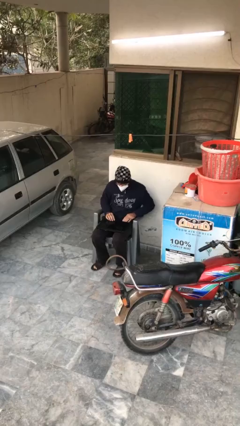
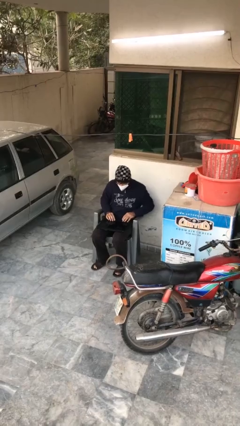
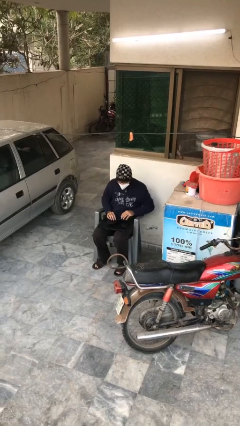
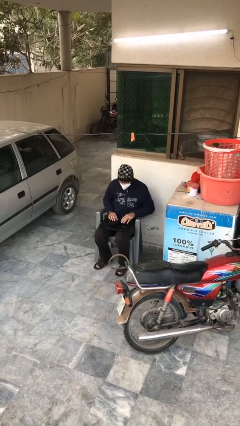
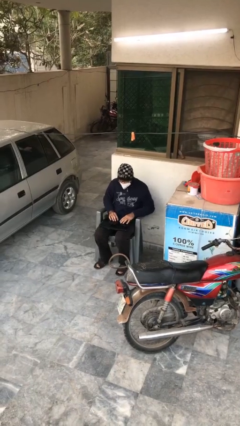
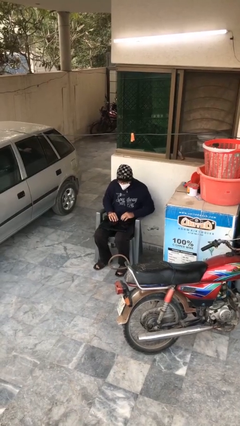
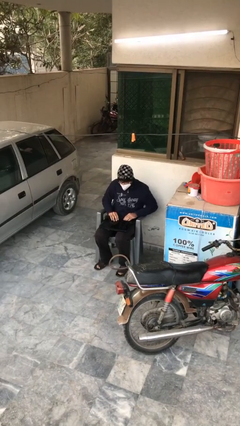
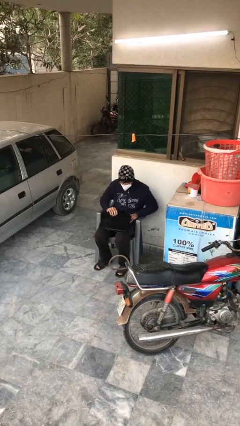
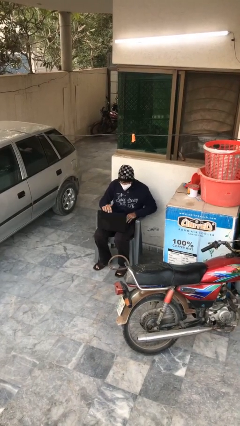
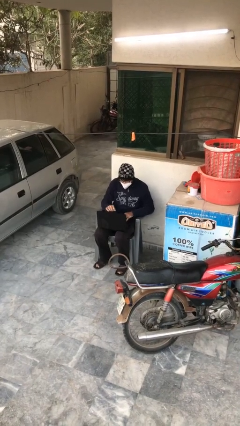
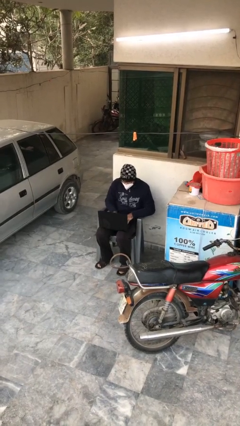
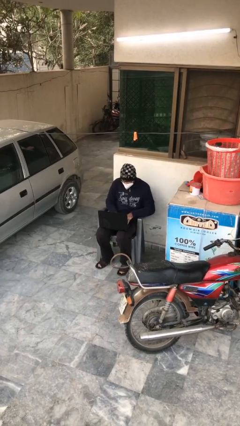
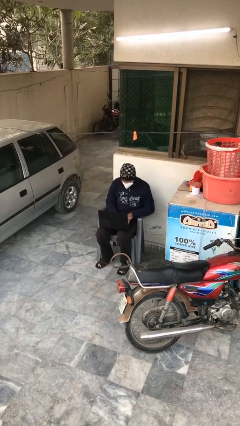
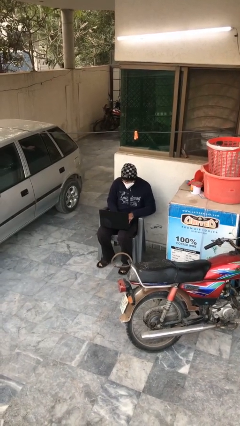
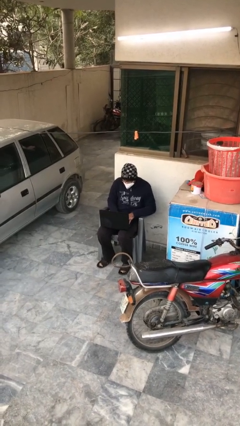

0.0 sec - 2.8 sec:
person interacts with laptop

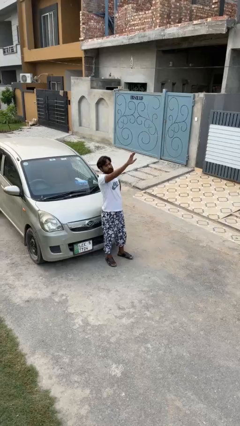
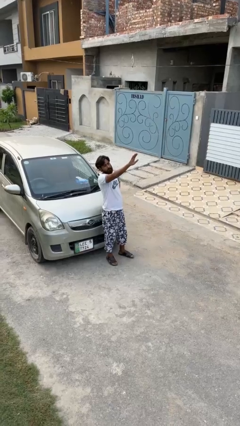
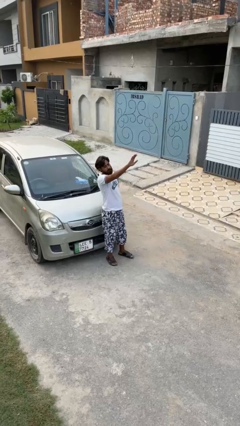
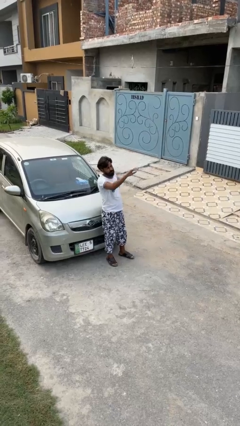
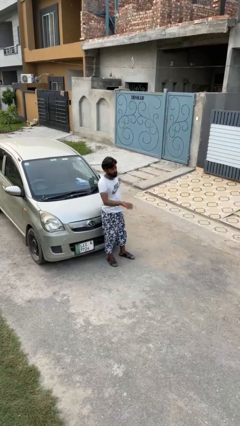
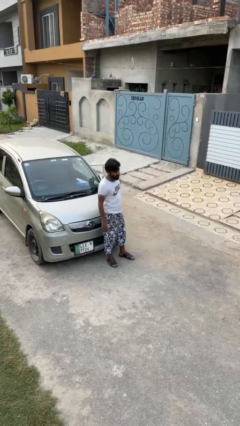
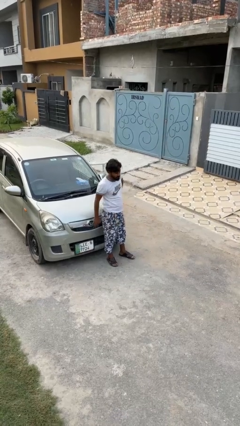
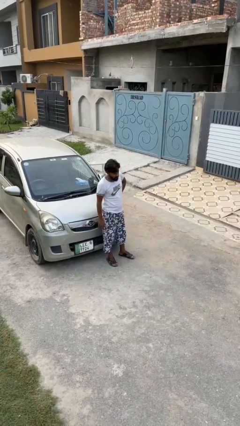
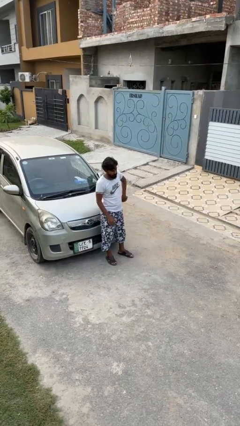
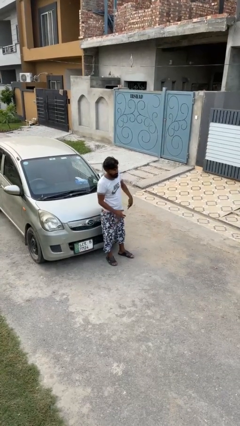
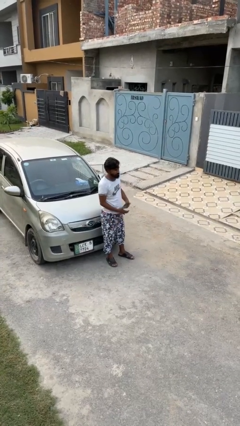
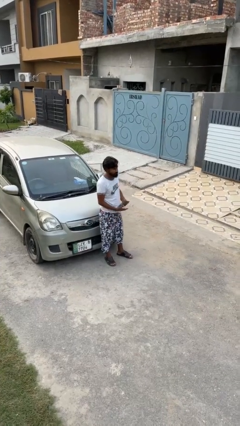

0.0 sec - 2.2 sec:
person gestures lower hand

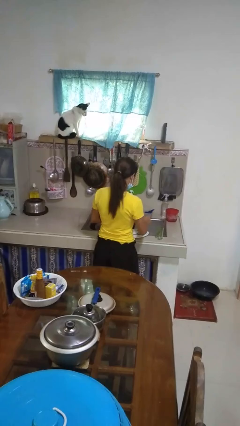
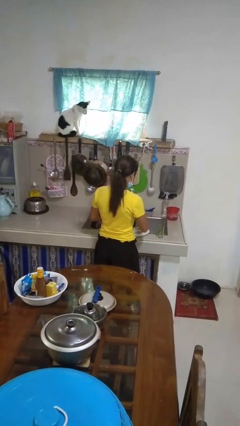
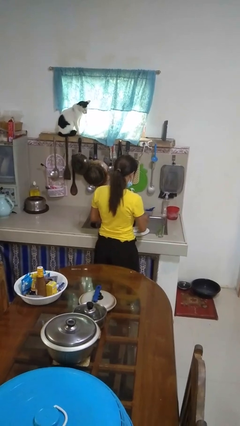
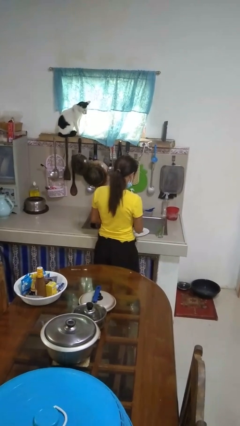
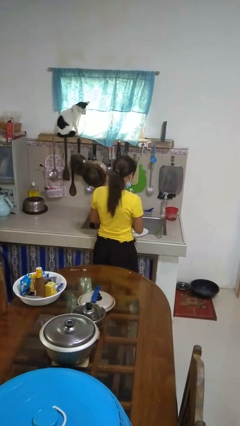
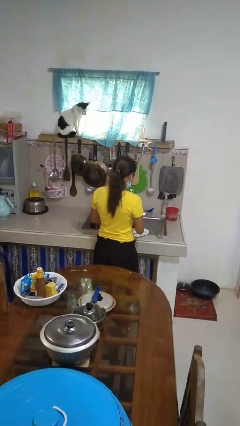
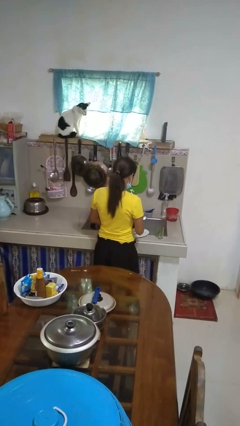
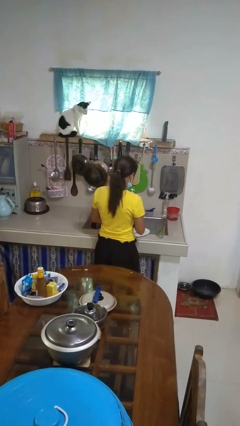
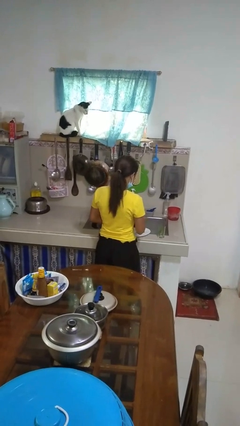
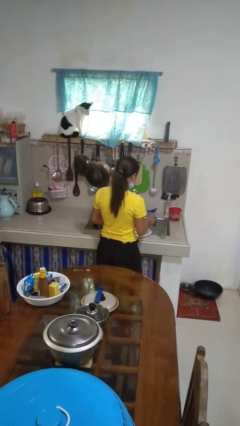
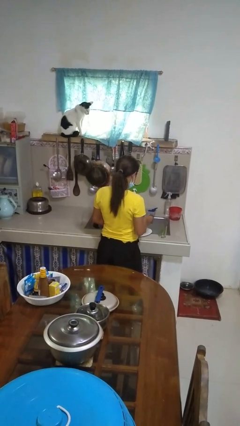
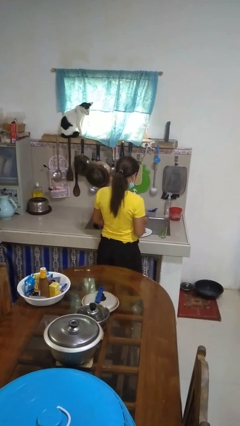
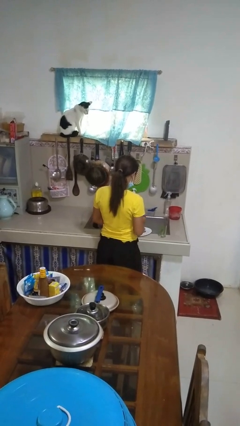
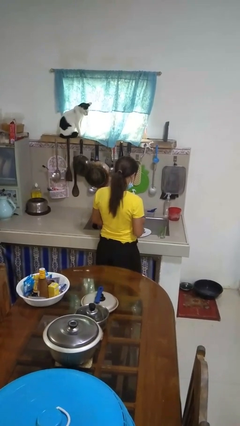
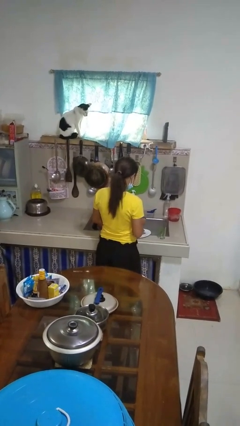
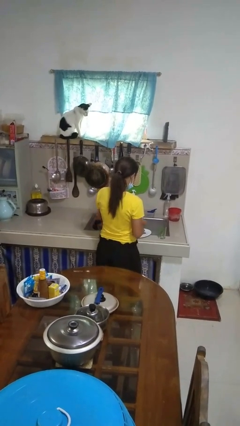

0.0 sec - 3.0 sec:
person dries dish

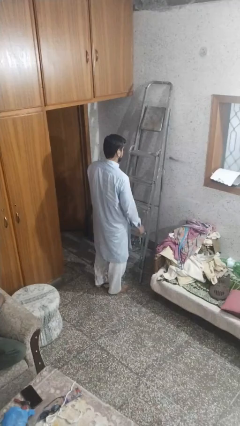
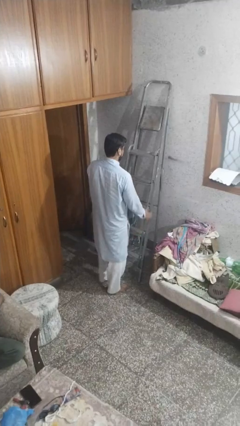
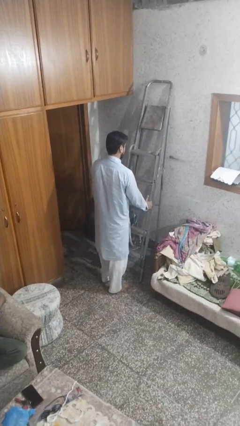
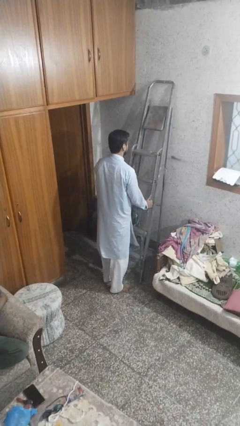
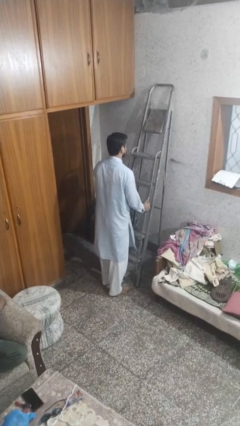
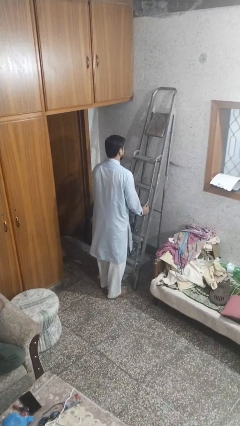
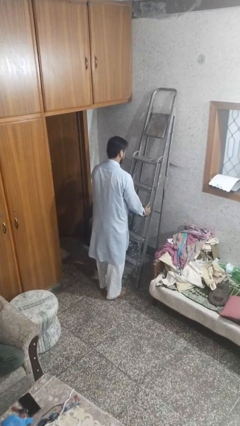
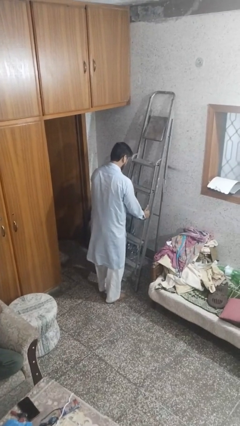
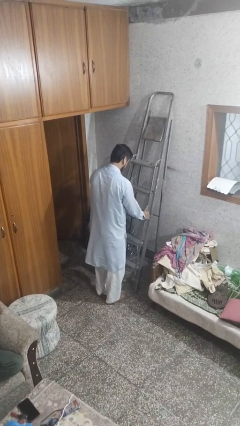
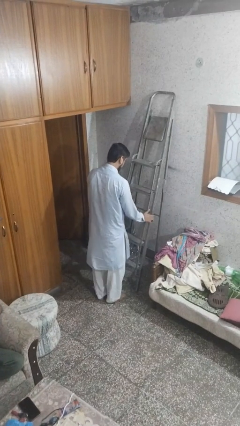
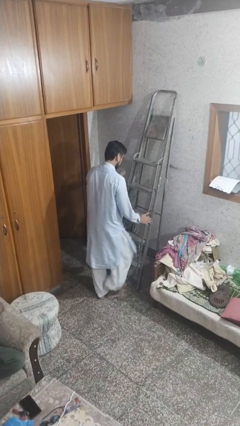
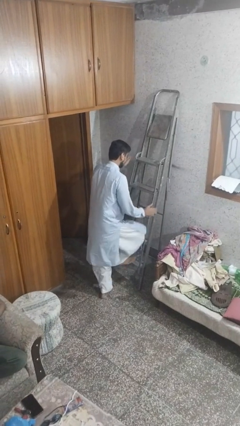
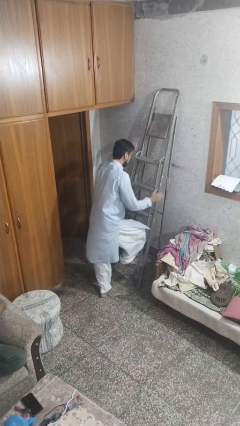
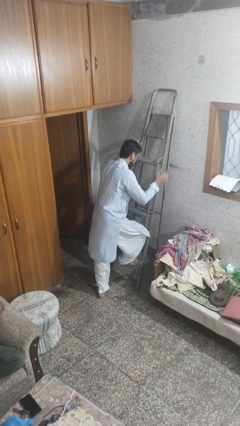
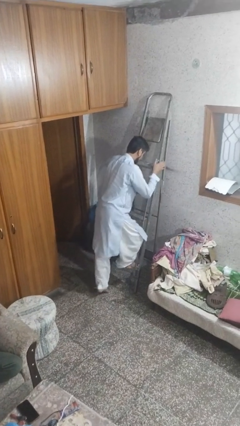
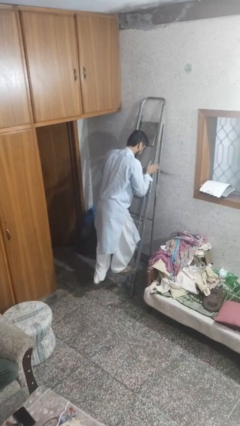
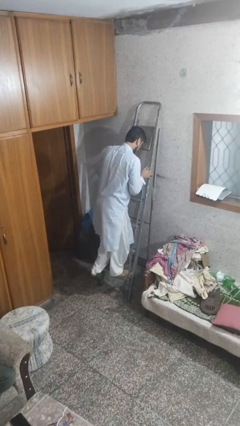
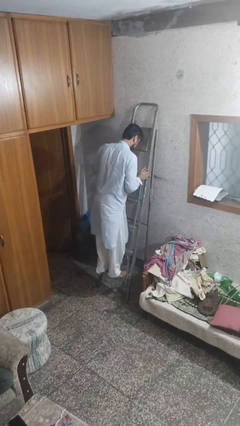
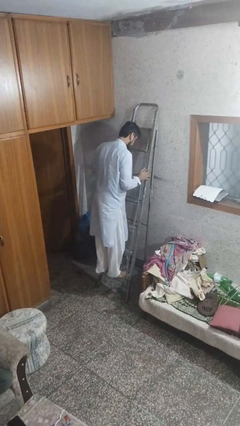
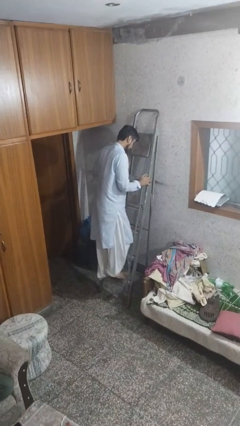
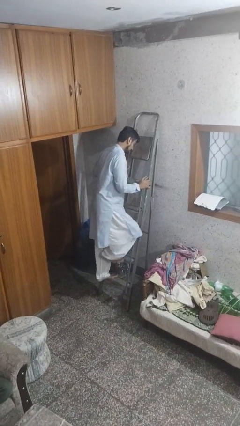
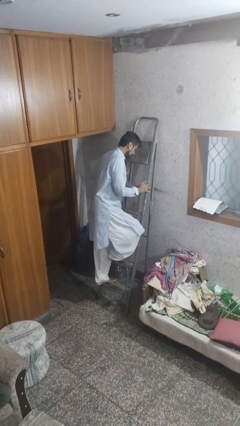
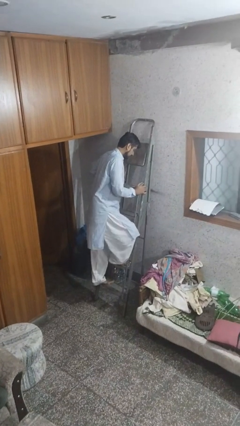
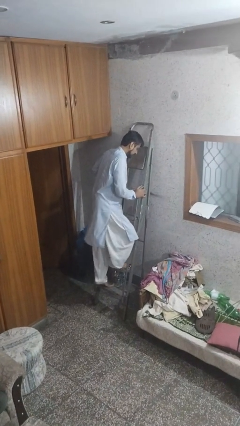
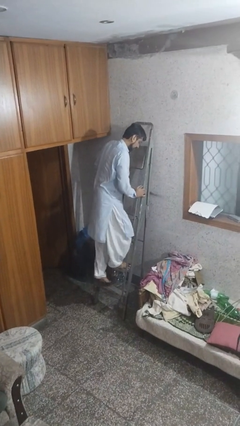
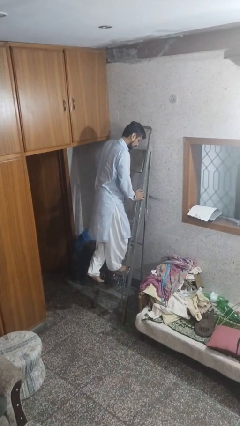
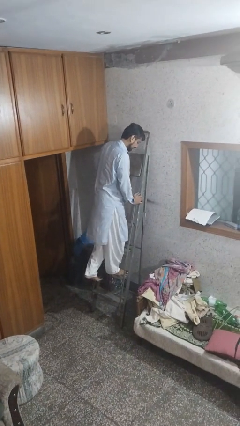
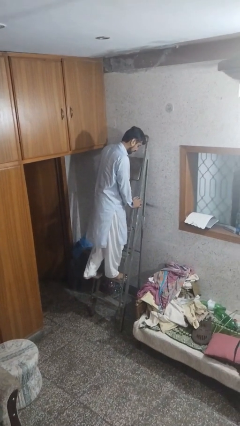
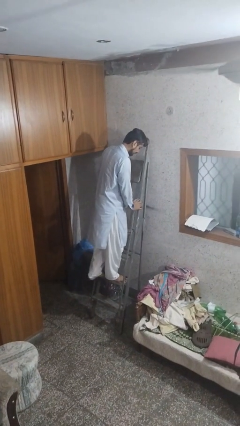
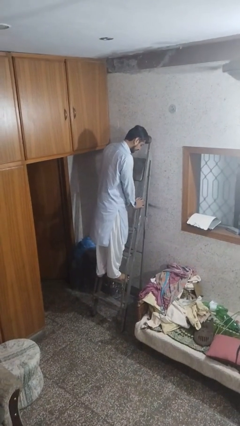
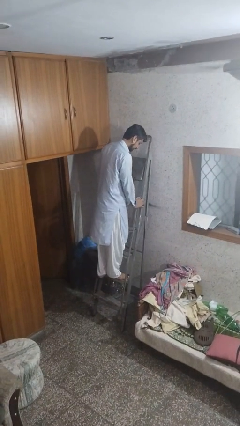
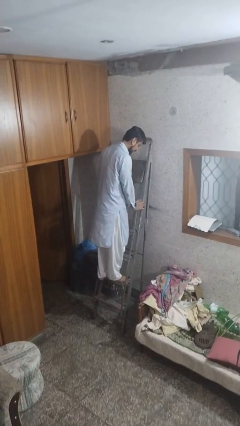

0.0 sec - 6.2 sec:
person climbs up ladder

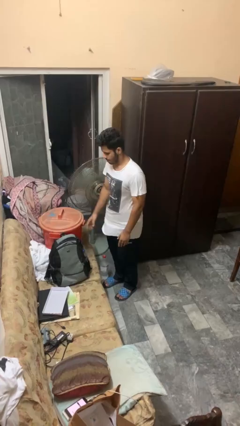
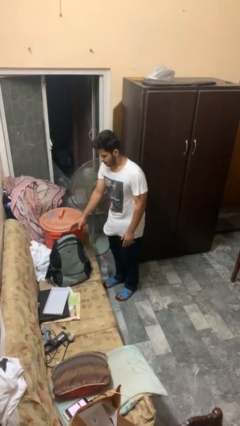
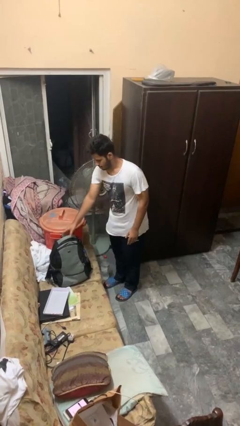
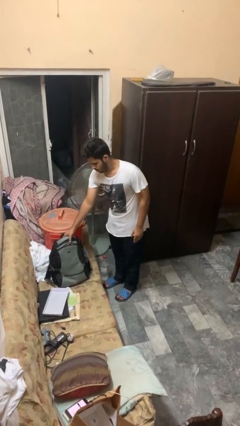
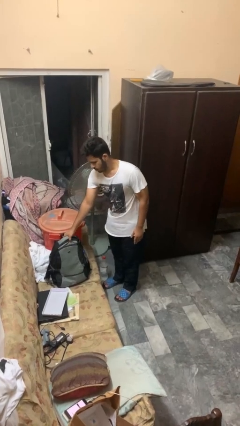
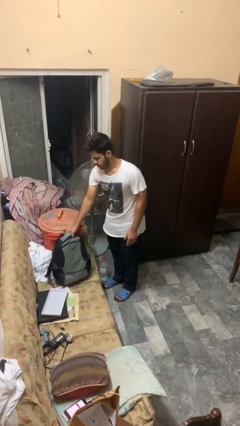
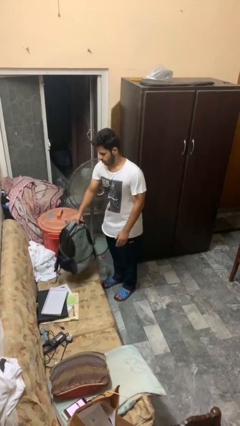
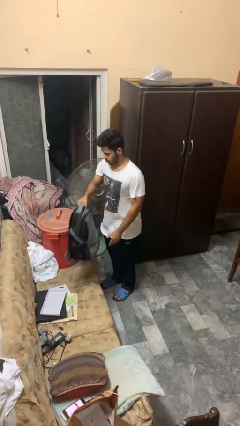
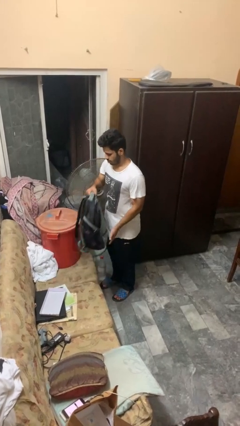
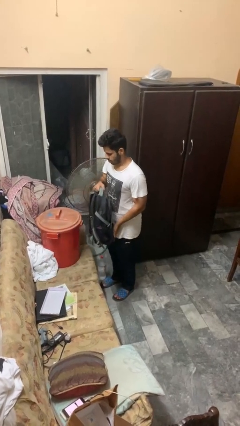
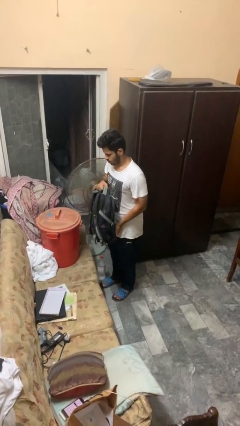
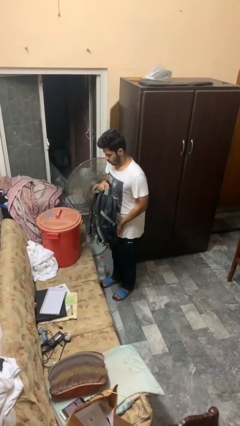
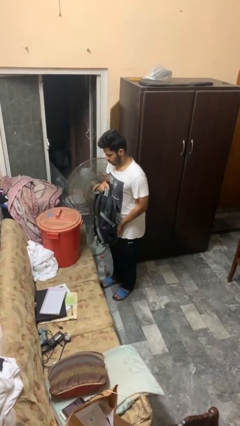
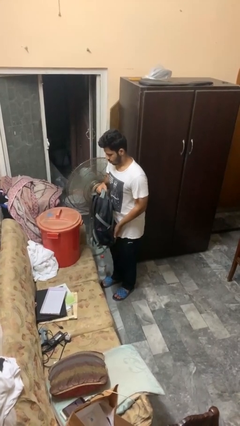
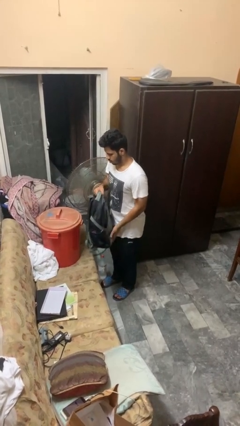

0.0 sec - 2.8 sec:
person picks up object from couch

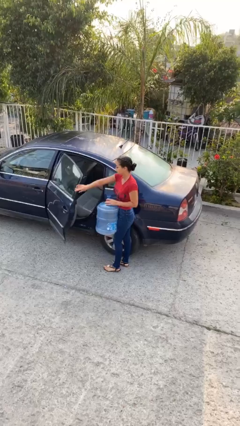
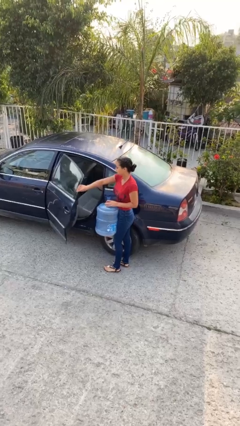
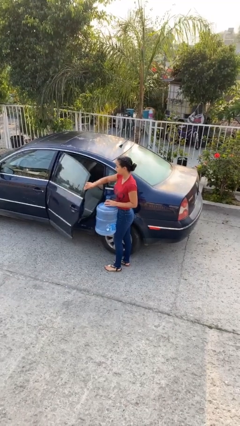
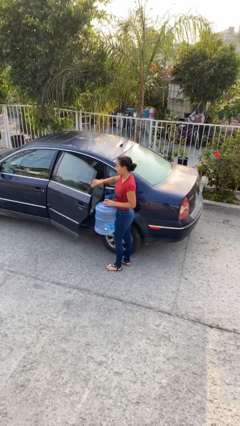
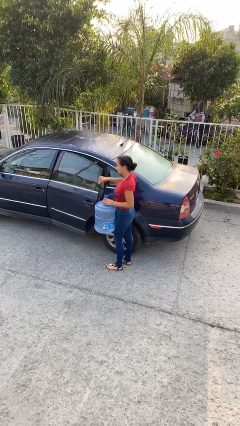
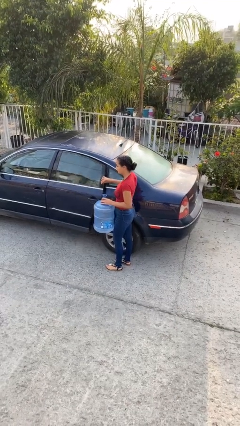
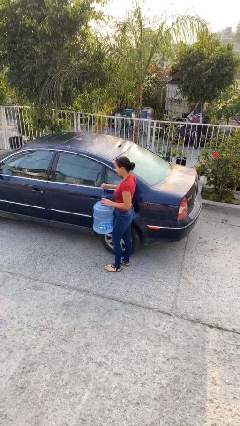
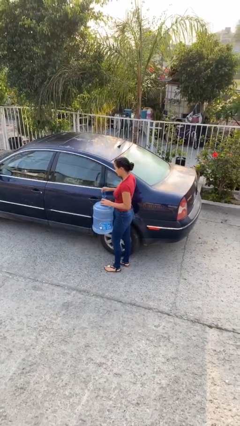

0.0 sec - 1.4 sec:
person closes car door
